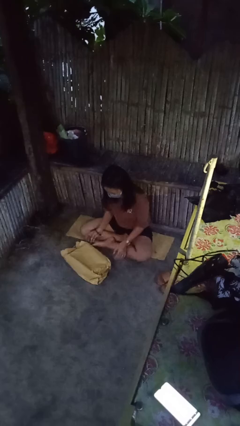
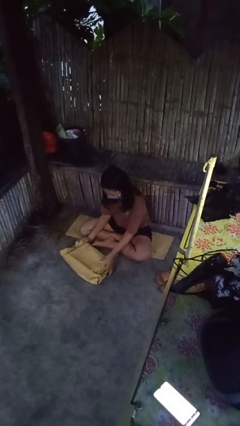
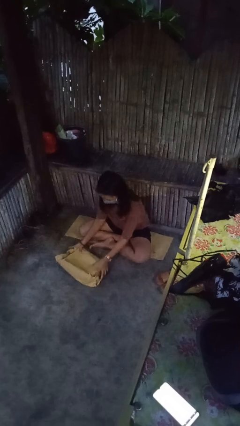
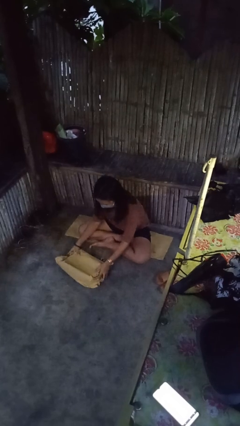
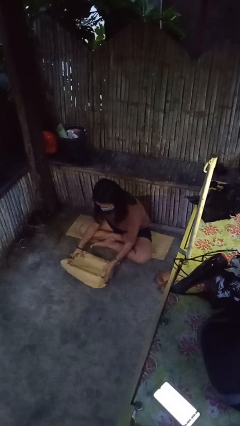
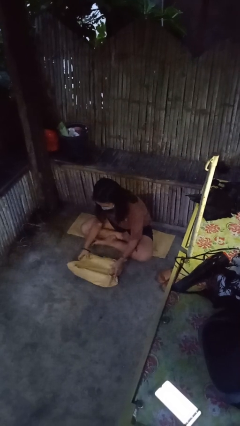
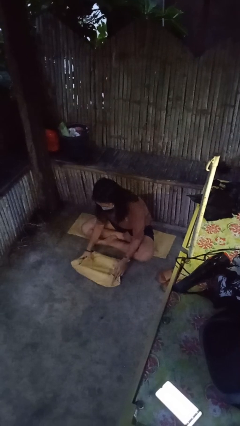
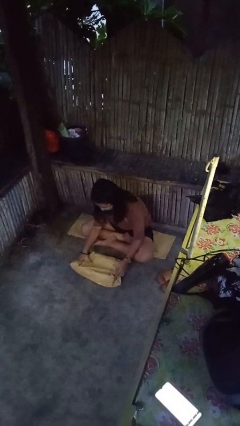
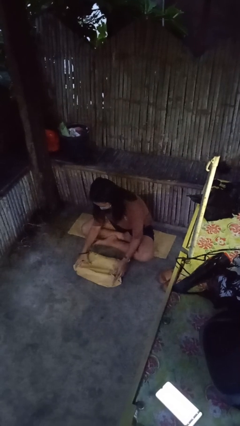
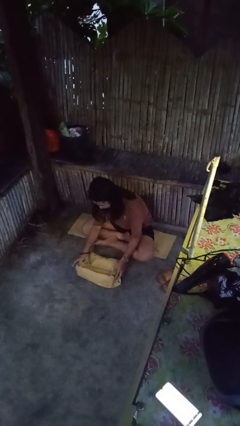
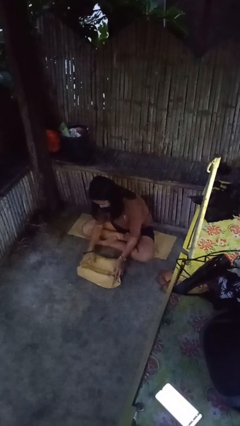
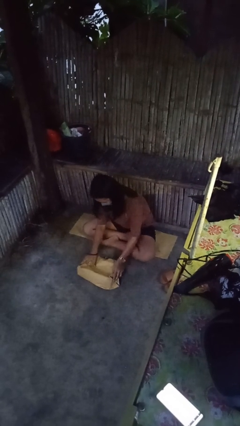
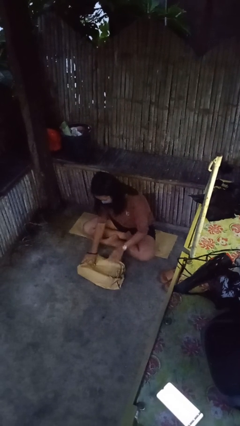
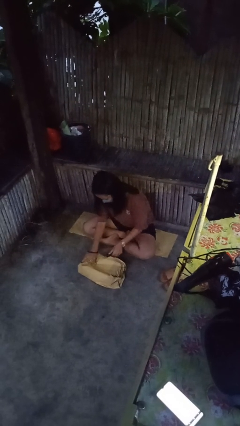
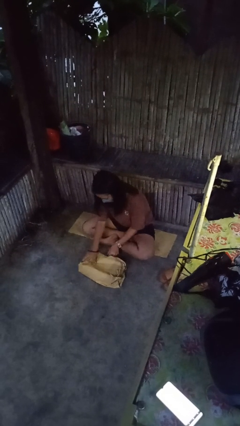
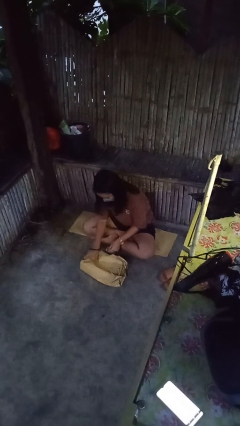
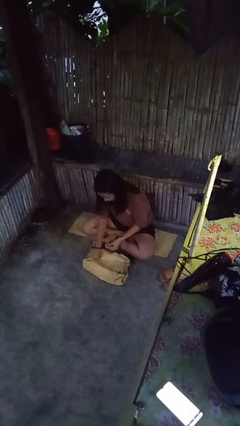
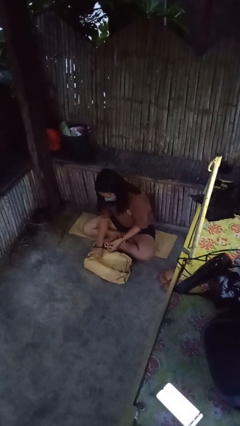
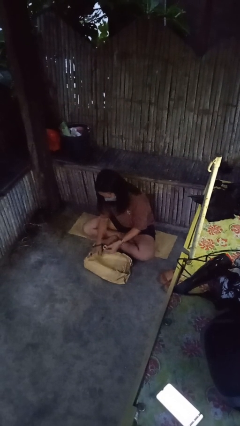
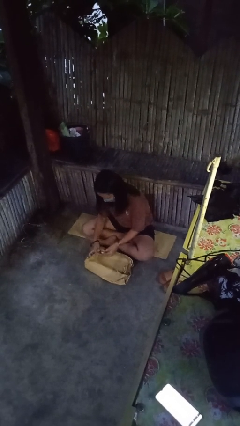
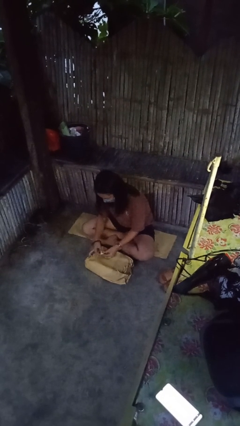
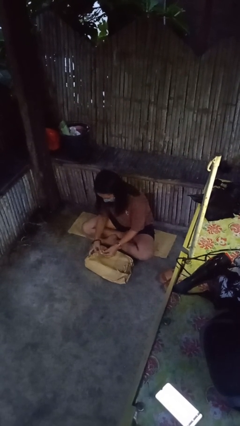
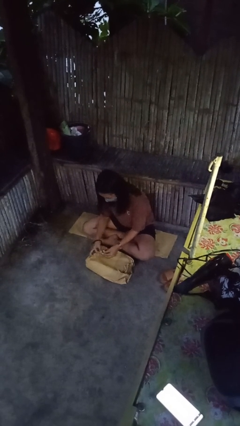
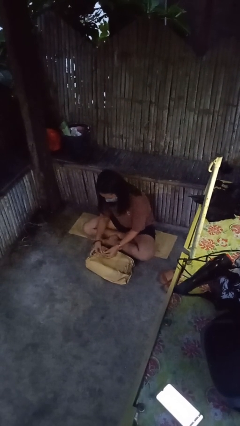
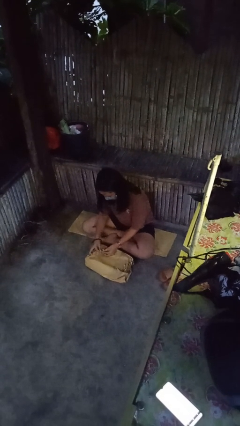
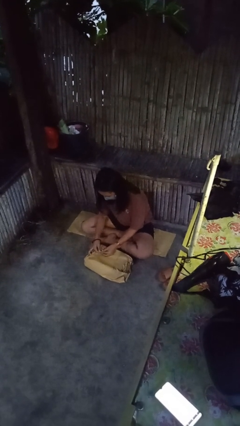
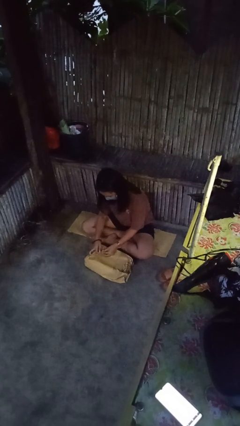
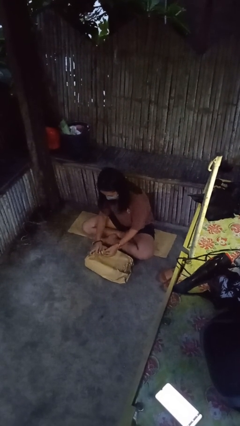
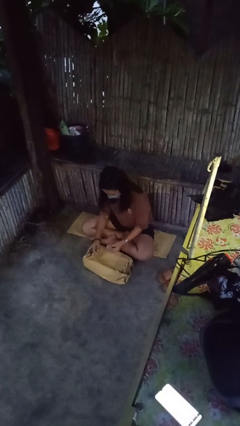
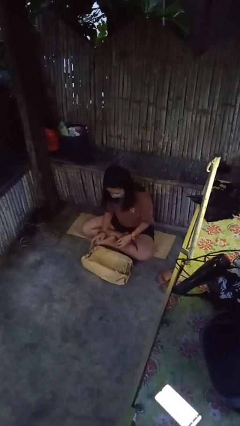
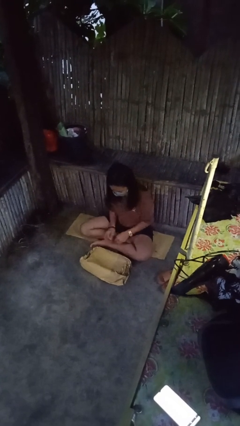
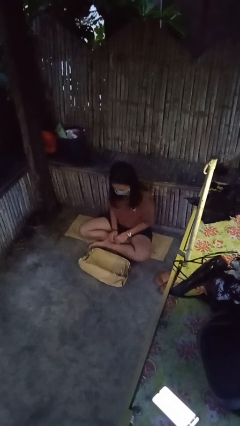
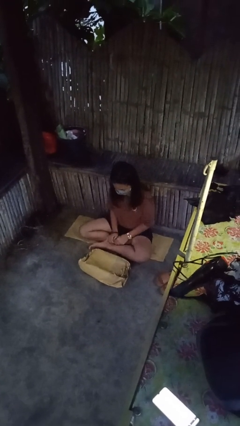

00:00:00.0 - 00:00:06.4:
person wraps box

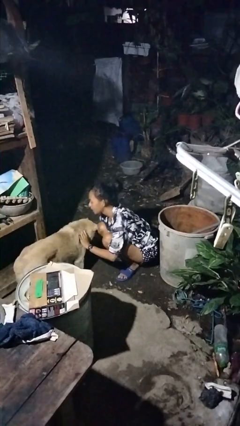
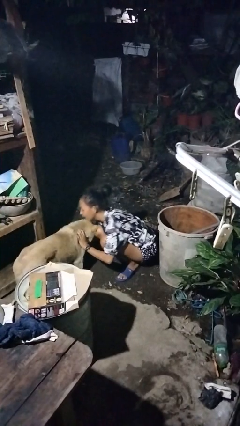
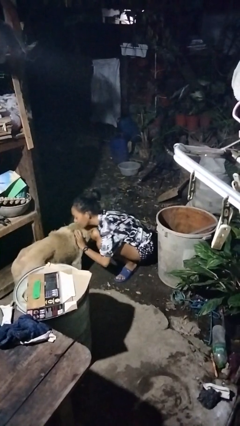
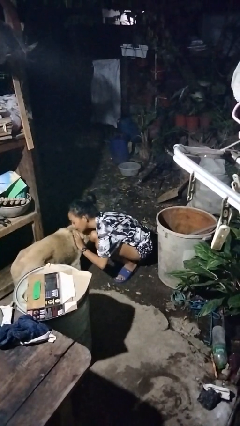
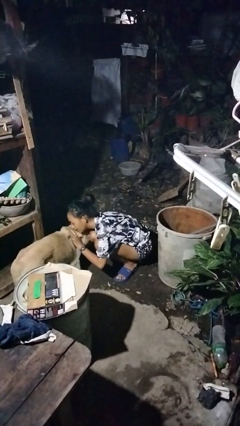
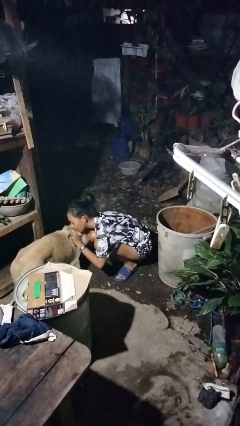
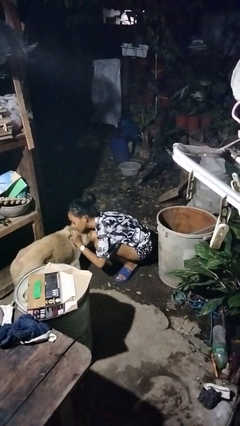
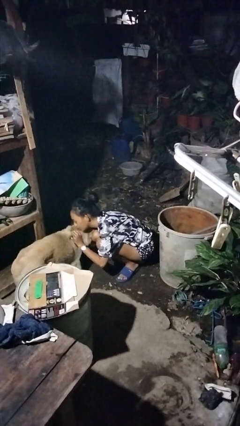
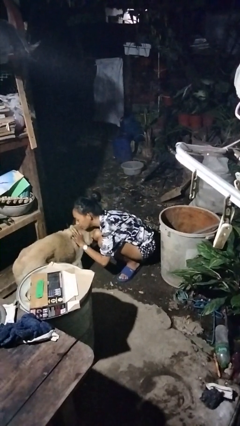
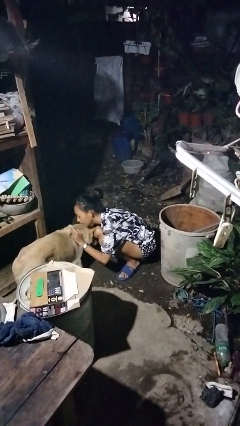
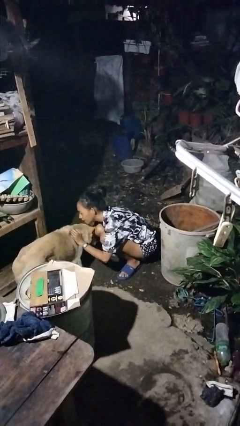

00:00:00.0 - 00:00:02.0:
person hugs dog

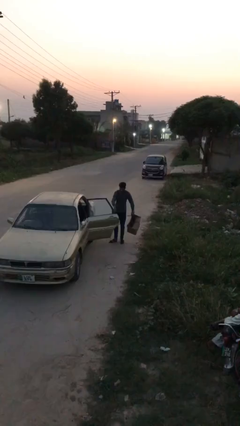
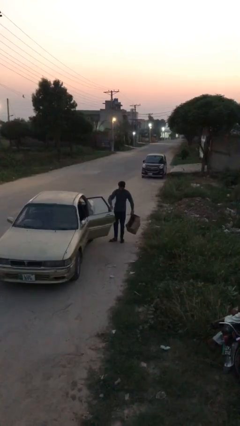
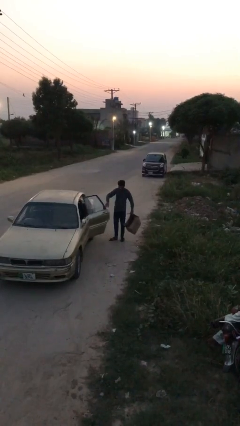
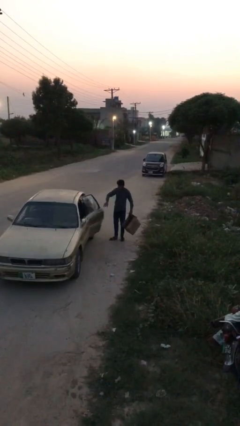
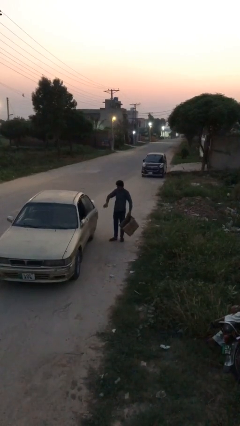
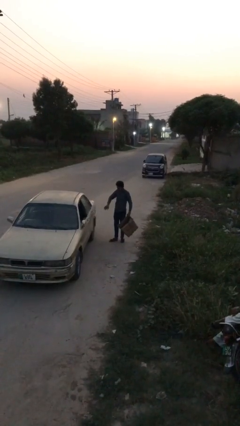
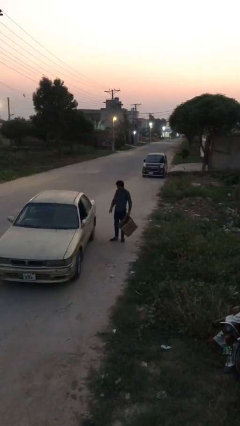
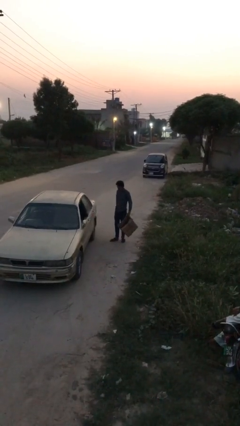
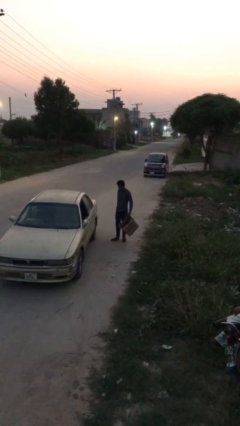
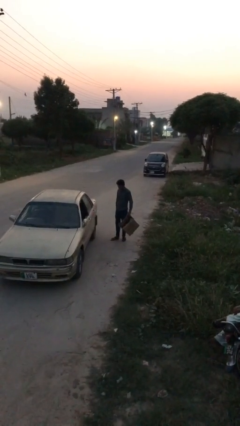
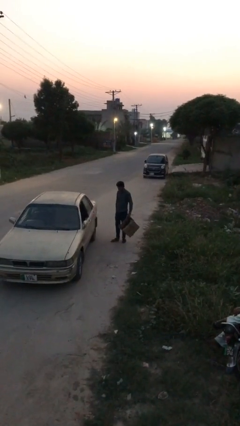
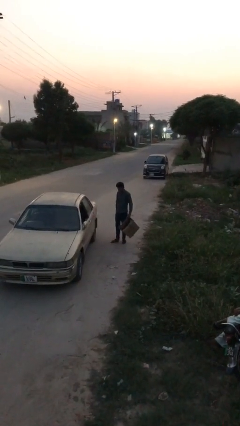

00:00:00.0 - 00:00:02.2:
person closes car door

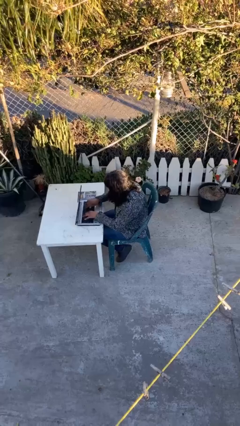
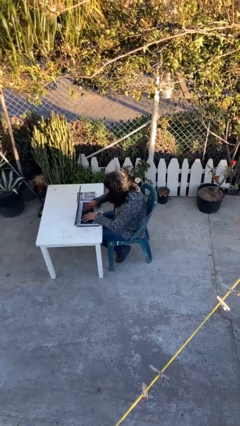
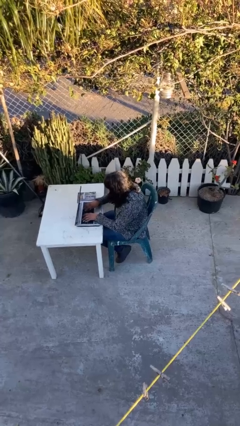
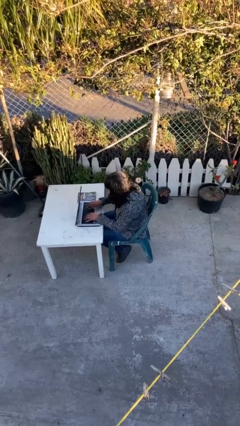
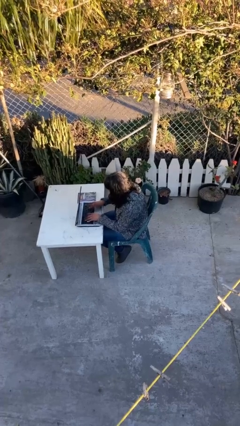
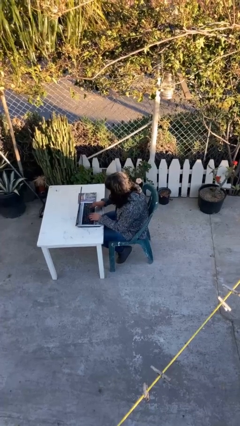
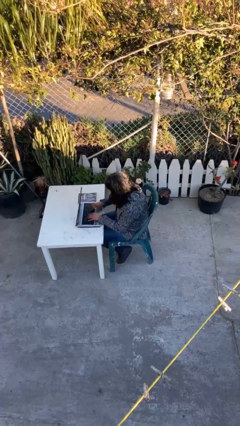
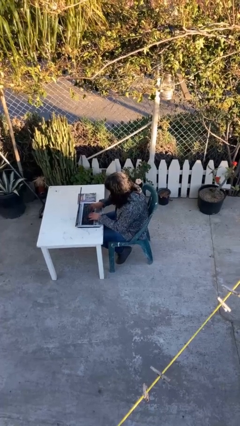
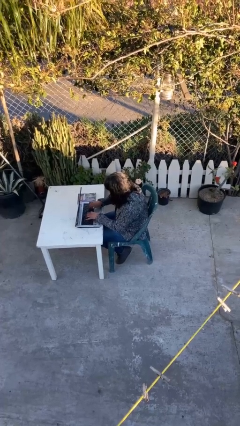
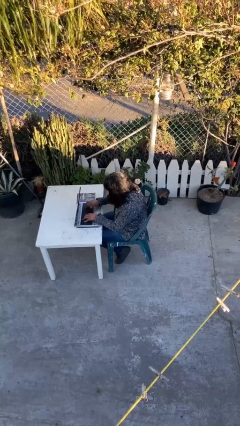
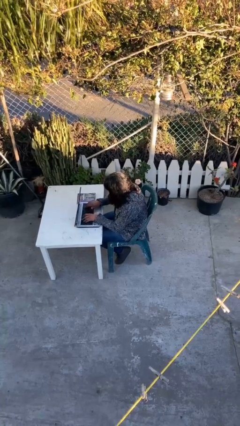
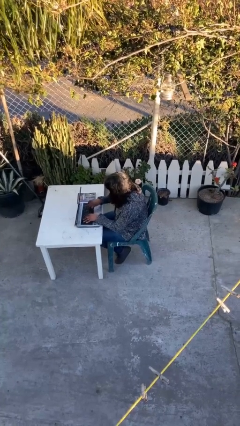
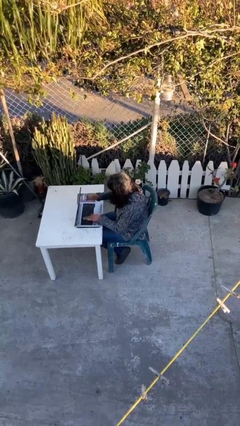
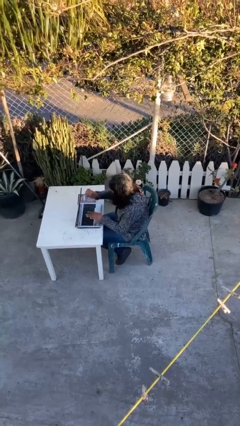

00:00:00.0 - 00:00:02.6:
person interacts with laptop

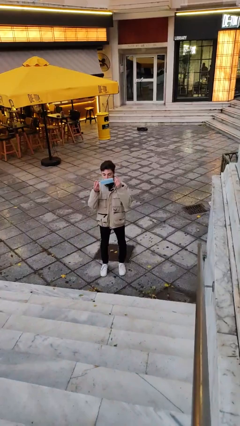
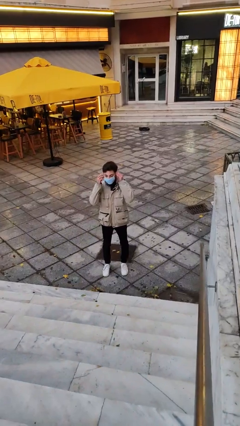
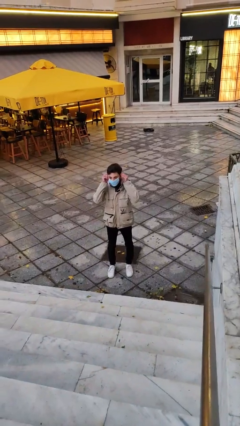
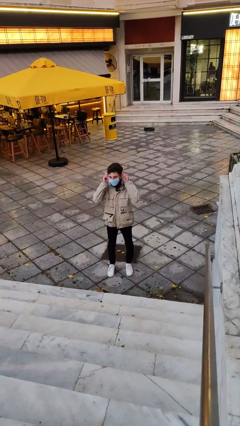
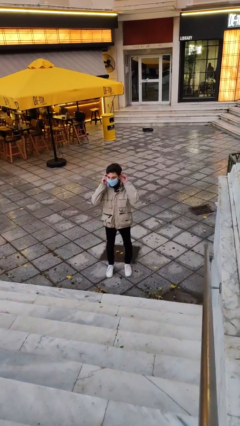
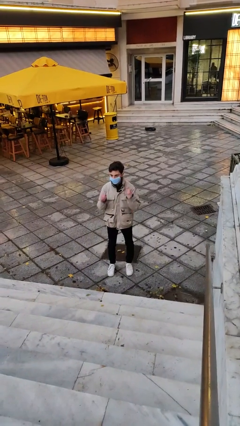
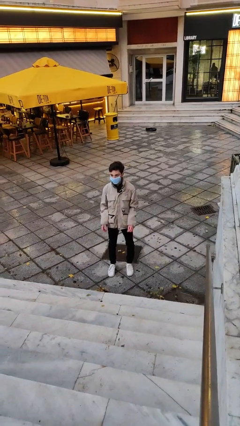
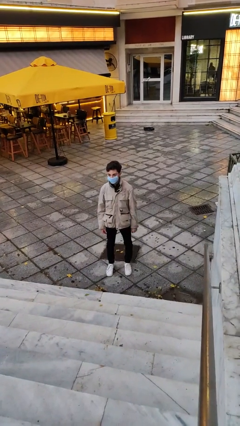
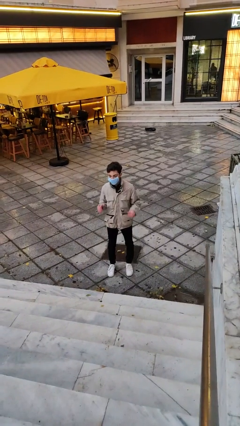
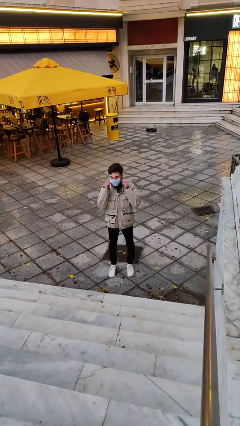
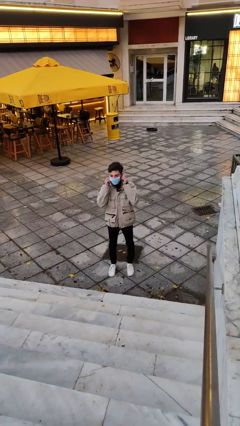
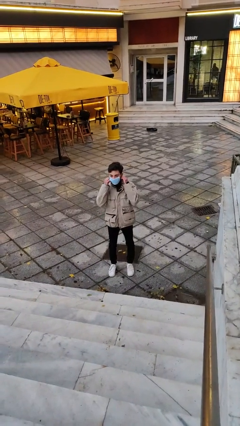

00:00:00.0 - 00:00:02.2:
person puts on facemask

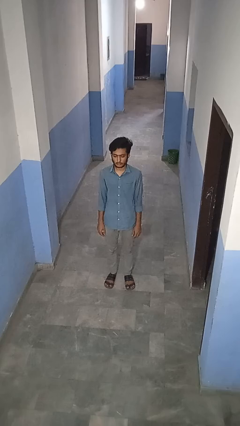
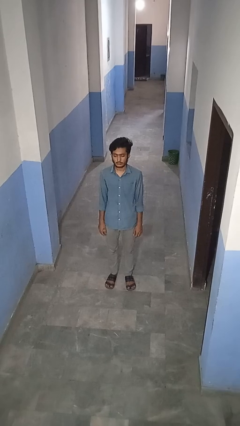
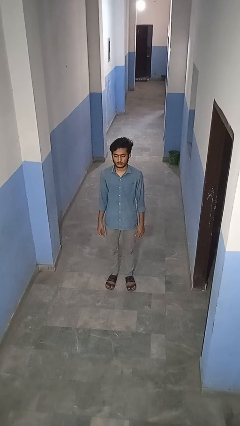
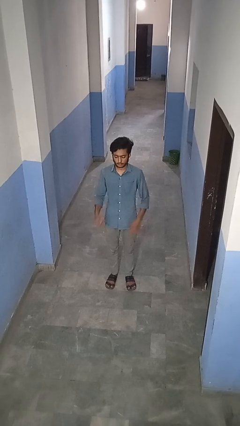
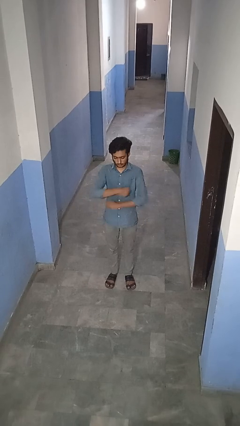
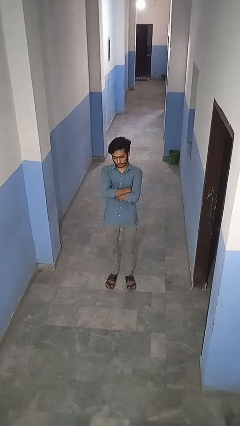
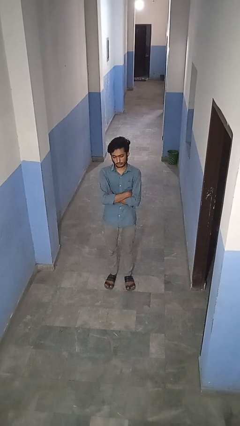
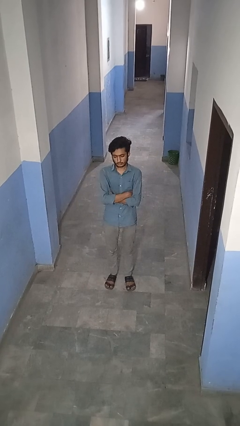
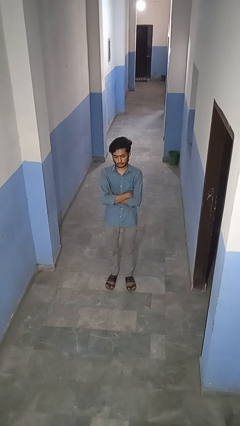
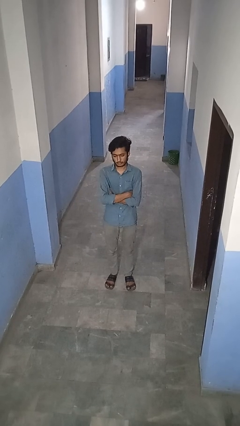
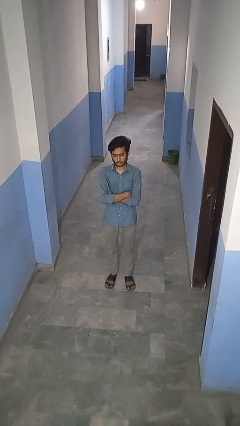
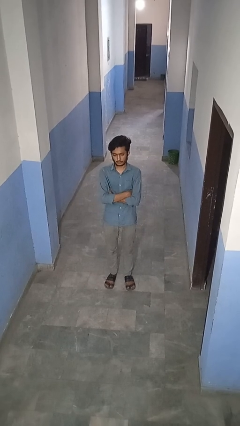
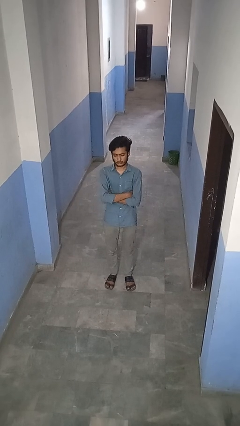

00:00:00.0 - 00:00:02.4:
person crosses arms
